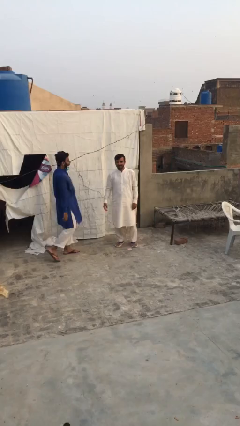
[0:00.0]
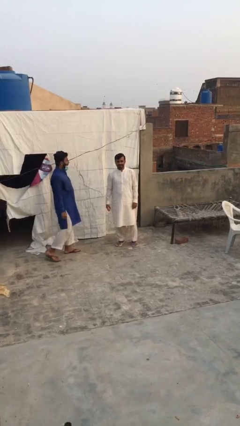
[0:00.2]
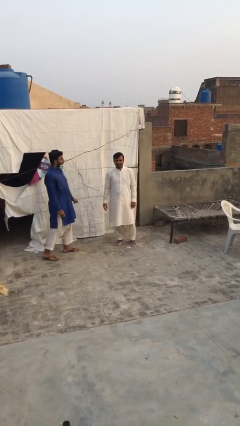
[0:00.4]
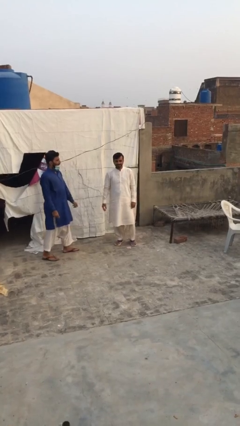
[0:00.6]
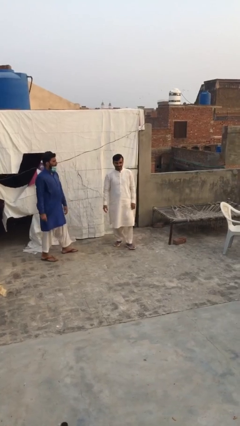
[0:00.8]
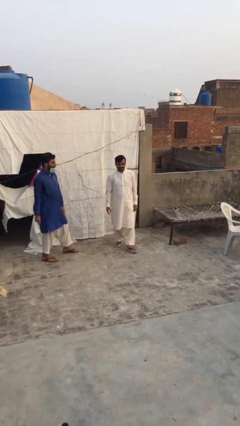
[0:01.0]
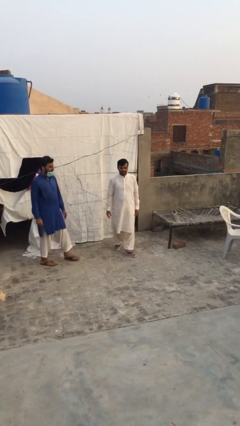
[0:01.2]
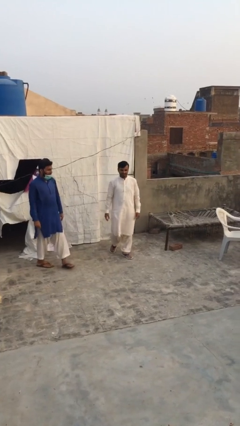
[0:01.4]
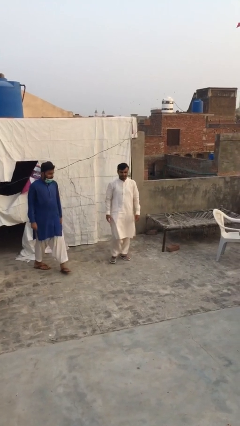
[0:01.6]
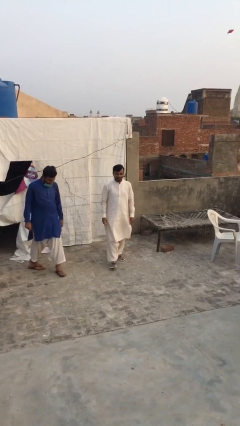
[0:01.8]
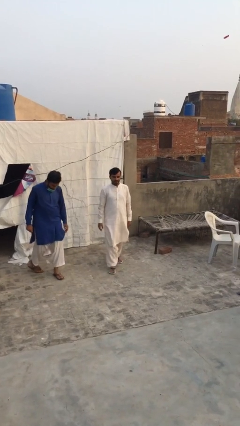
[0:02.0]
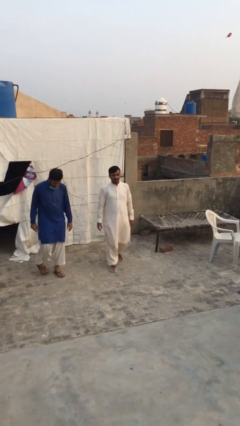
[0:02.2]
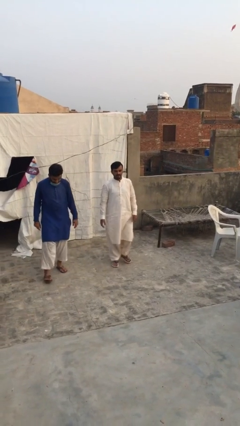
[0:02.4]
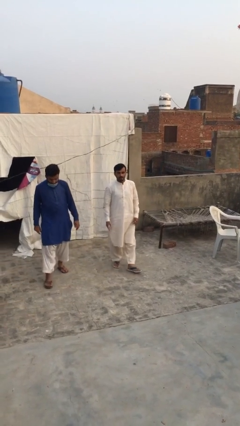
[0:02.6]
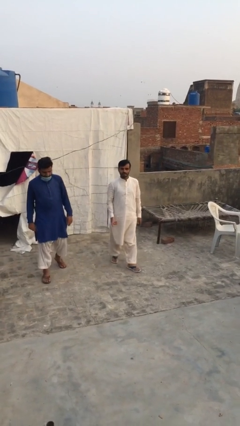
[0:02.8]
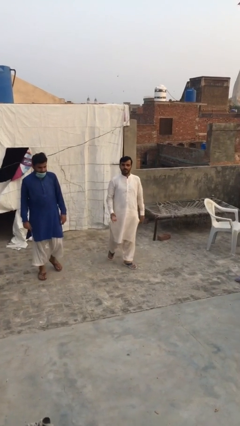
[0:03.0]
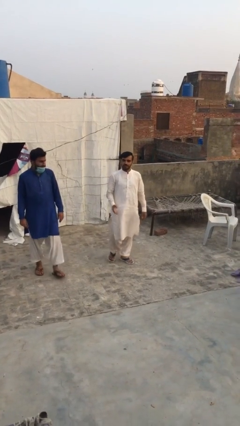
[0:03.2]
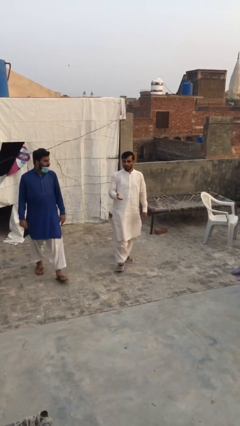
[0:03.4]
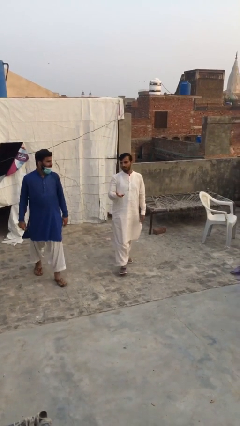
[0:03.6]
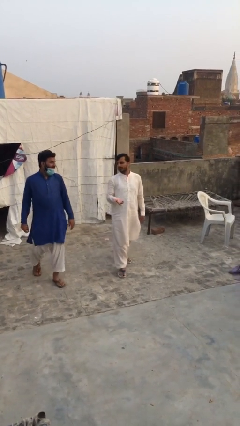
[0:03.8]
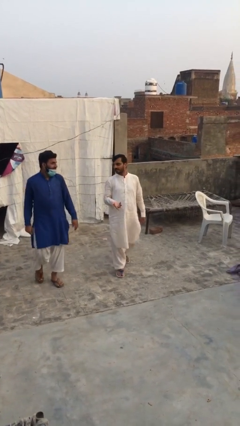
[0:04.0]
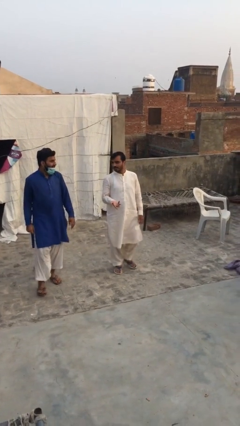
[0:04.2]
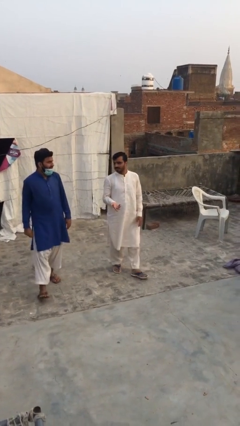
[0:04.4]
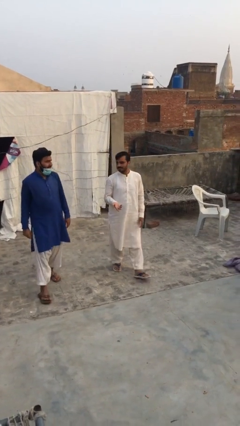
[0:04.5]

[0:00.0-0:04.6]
person talks to person

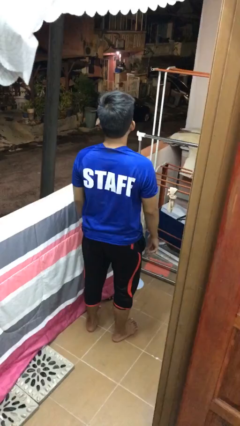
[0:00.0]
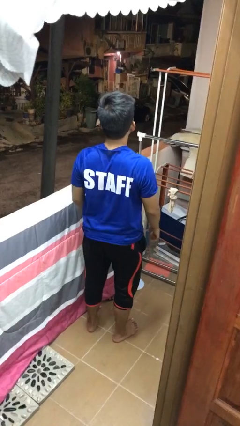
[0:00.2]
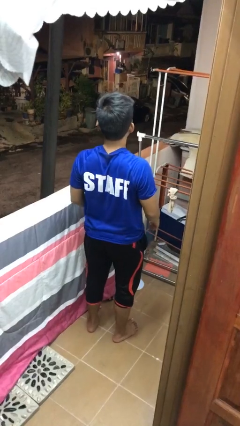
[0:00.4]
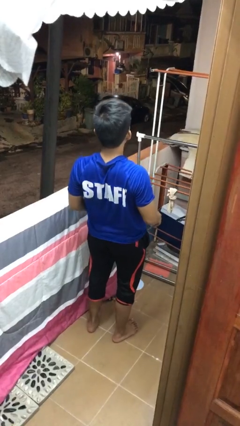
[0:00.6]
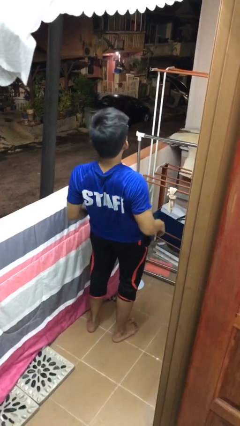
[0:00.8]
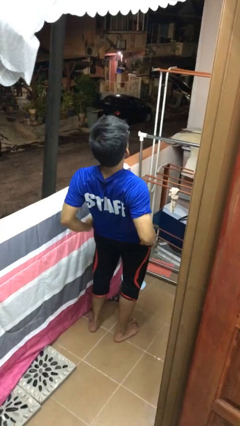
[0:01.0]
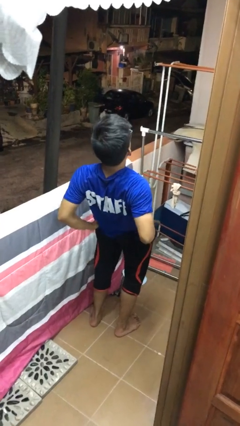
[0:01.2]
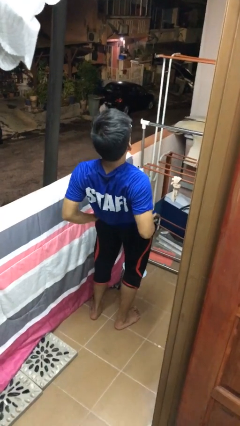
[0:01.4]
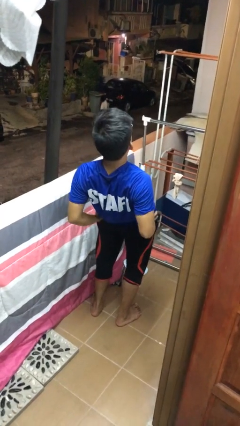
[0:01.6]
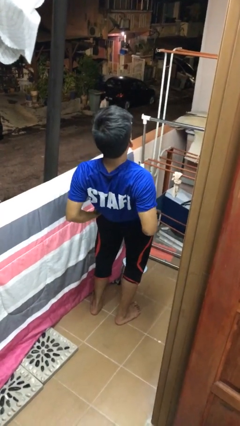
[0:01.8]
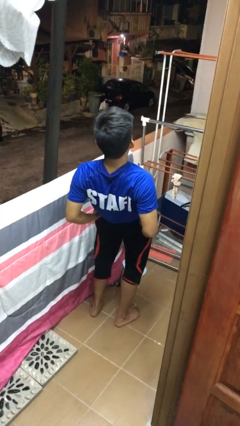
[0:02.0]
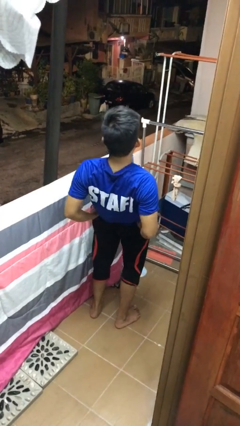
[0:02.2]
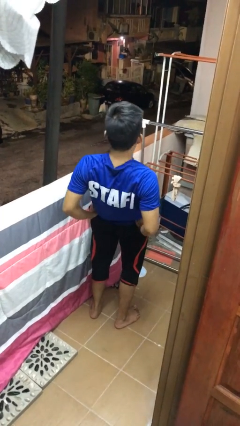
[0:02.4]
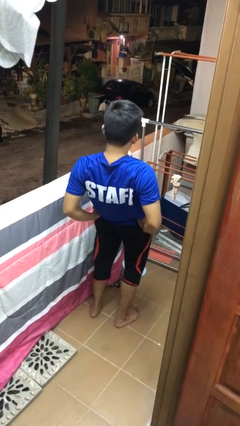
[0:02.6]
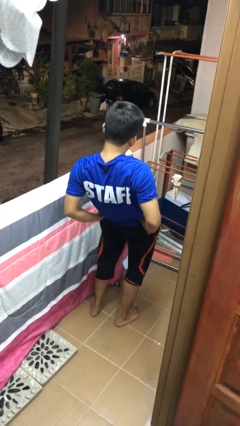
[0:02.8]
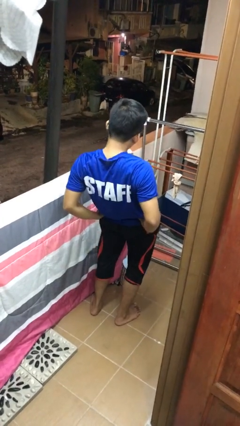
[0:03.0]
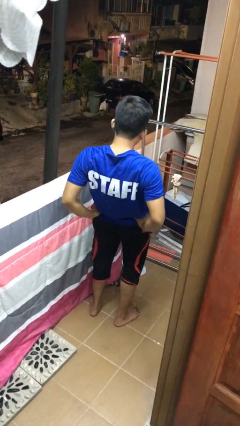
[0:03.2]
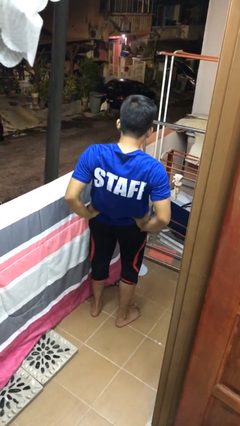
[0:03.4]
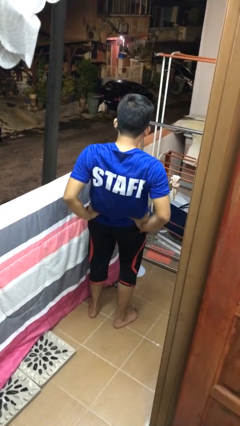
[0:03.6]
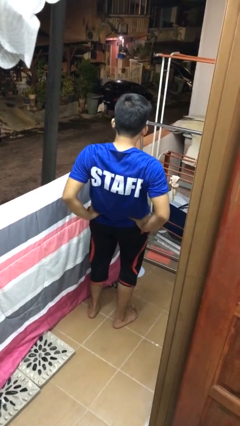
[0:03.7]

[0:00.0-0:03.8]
person stretches back

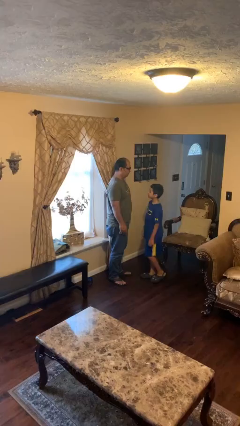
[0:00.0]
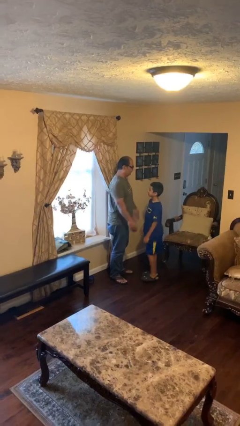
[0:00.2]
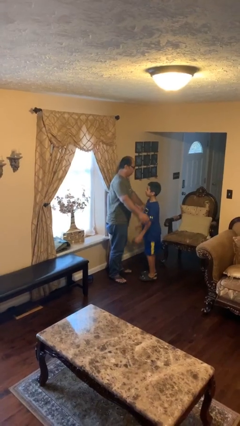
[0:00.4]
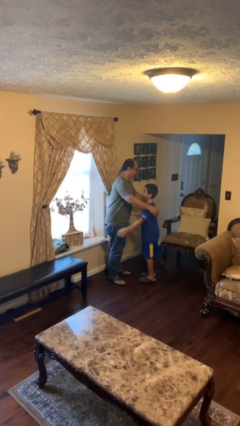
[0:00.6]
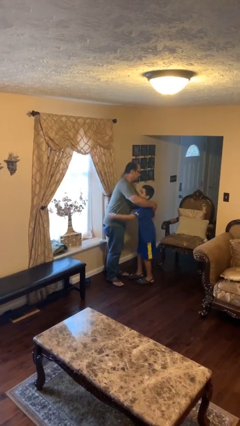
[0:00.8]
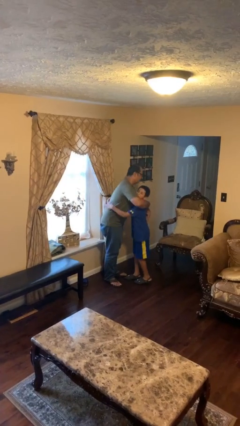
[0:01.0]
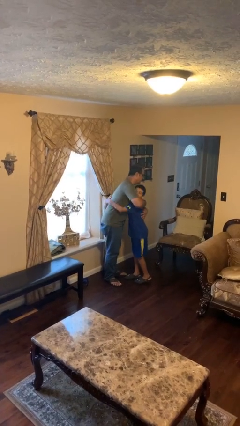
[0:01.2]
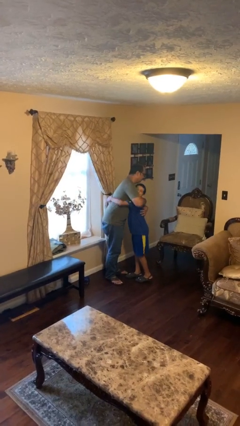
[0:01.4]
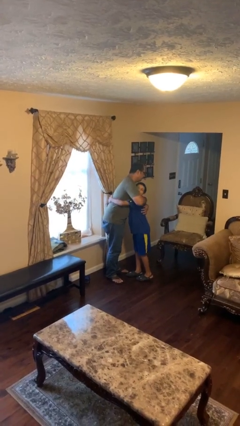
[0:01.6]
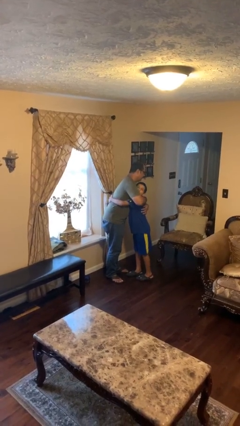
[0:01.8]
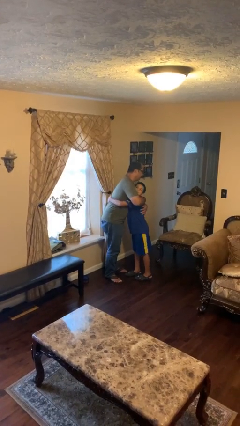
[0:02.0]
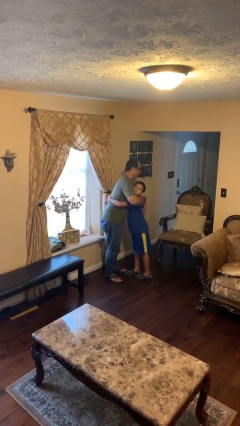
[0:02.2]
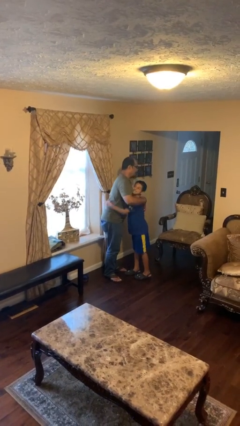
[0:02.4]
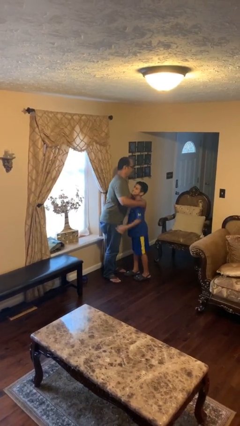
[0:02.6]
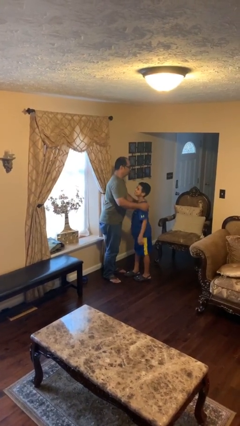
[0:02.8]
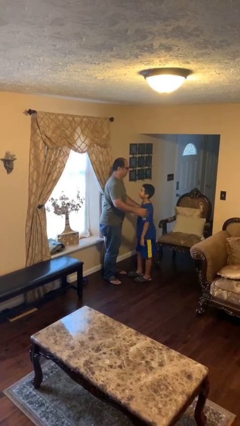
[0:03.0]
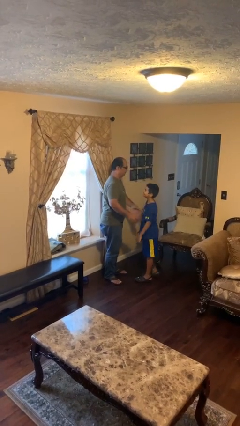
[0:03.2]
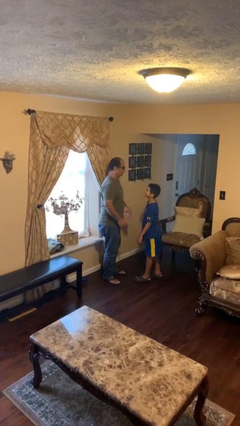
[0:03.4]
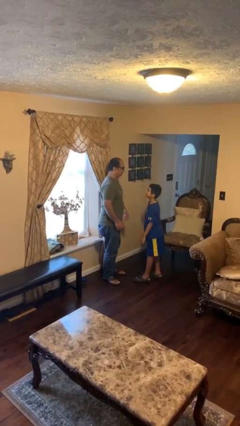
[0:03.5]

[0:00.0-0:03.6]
person embraces person

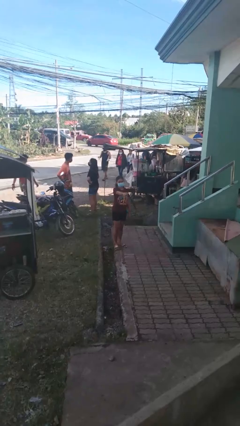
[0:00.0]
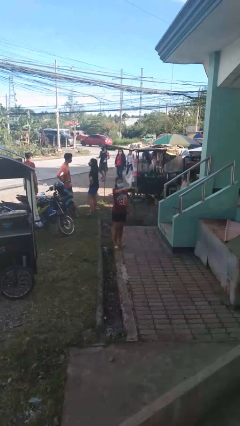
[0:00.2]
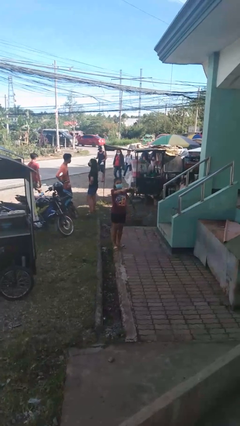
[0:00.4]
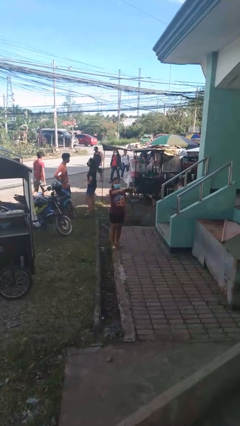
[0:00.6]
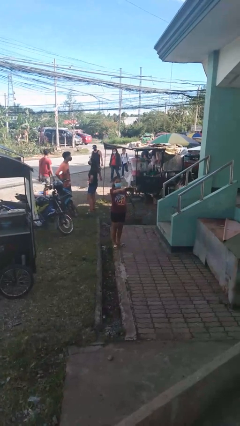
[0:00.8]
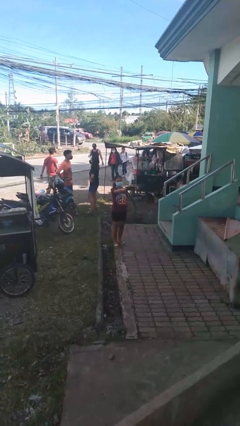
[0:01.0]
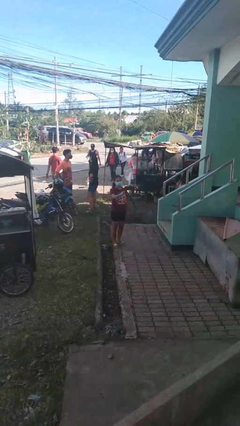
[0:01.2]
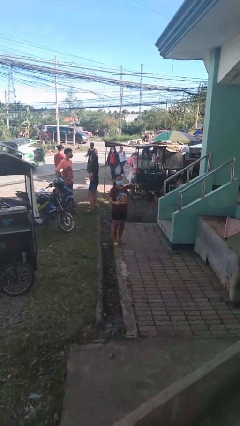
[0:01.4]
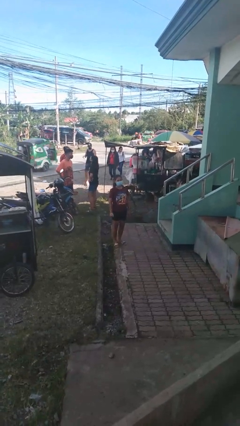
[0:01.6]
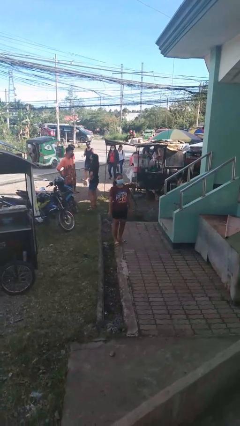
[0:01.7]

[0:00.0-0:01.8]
person points at person

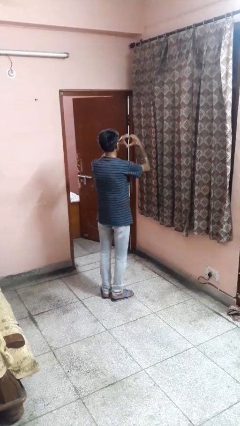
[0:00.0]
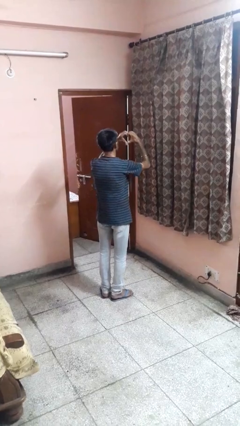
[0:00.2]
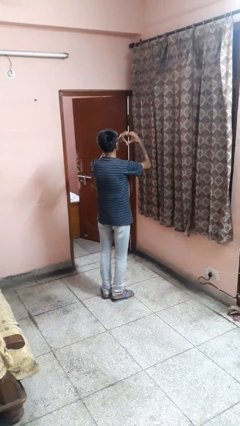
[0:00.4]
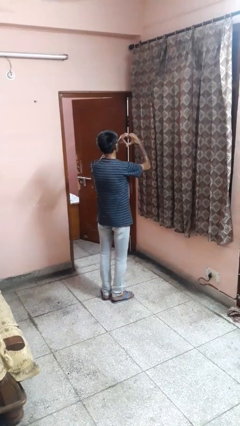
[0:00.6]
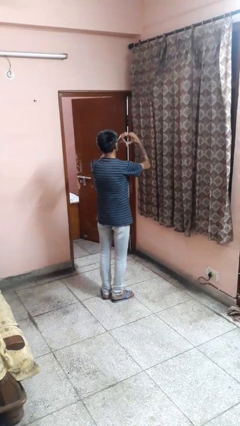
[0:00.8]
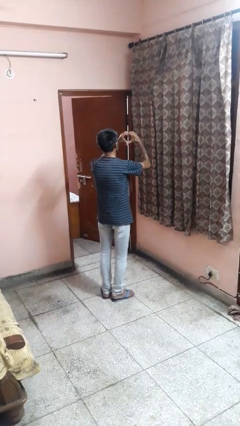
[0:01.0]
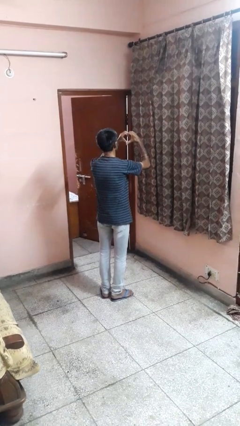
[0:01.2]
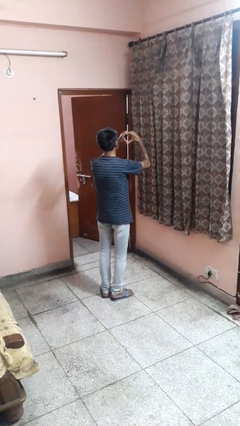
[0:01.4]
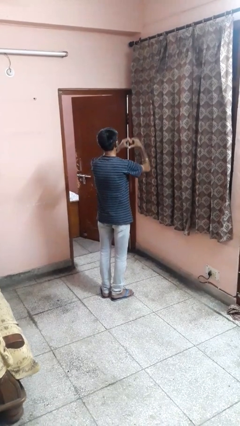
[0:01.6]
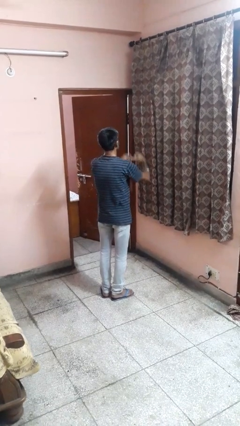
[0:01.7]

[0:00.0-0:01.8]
person gestures heart

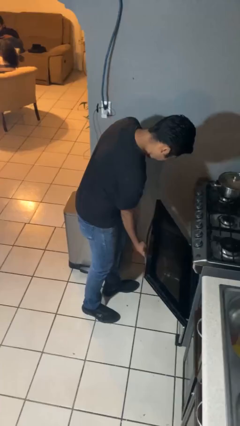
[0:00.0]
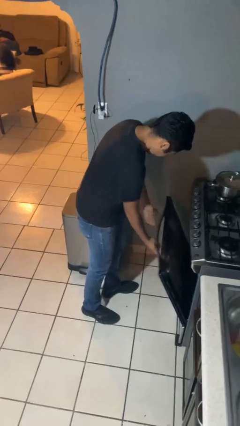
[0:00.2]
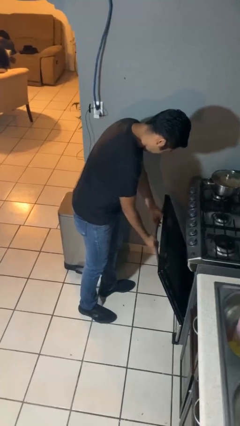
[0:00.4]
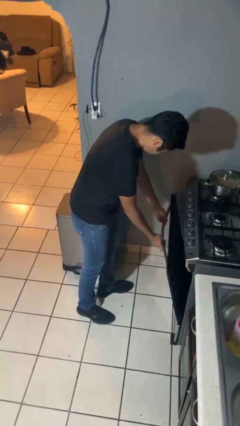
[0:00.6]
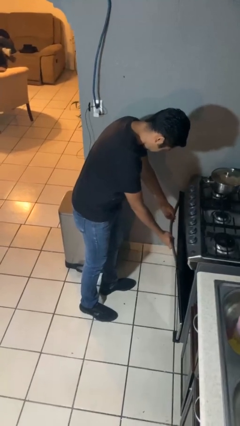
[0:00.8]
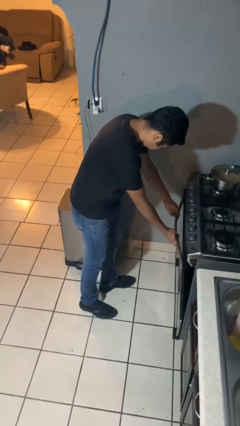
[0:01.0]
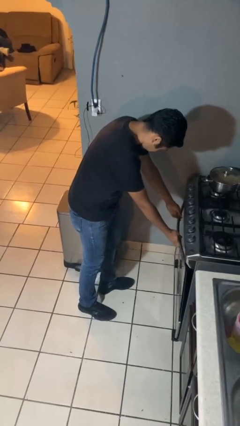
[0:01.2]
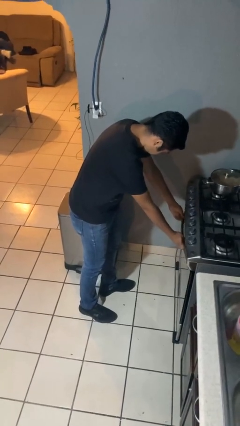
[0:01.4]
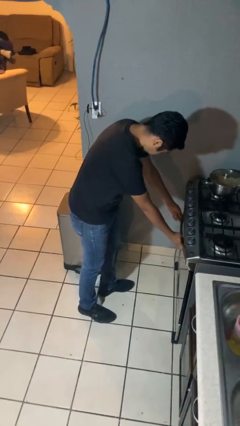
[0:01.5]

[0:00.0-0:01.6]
person closes oven door

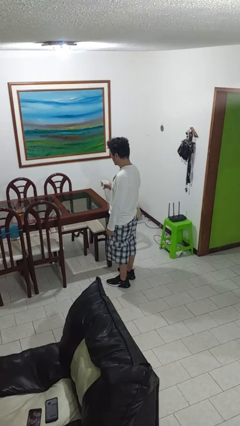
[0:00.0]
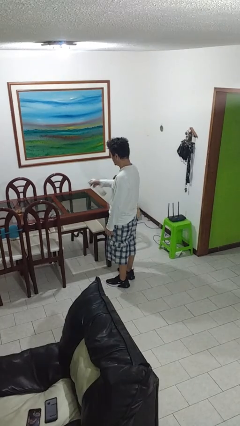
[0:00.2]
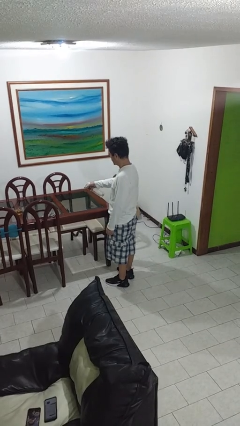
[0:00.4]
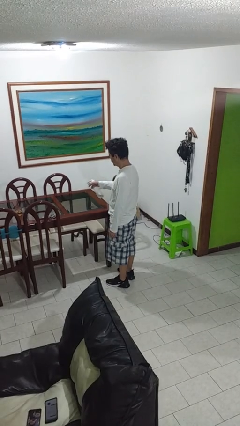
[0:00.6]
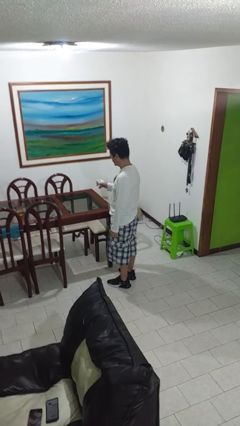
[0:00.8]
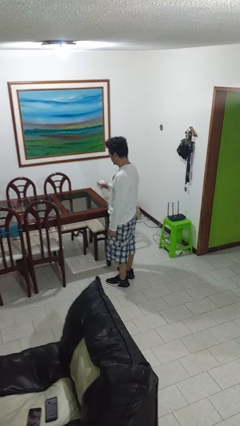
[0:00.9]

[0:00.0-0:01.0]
person sprays from bottle
